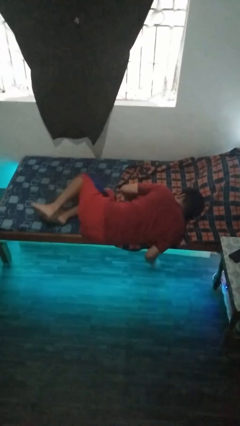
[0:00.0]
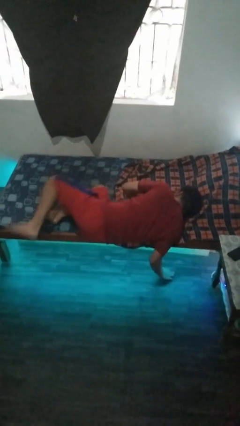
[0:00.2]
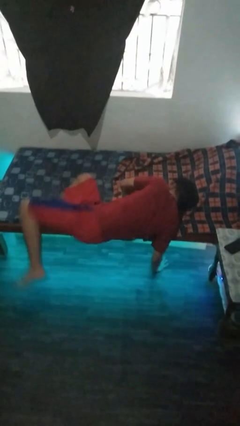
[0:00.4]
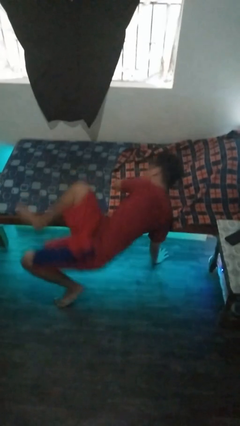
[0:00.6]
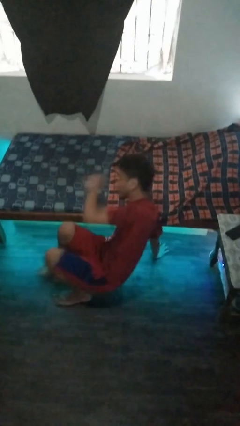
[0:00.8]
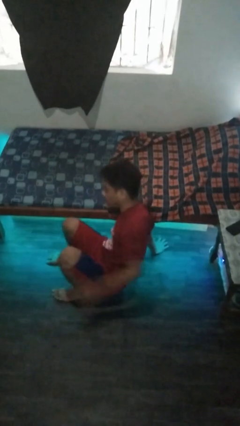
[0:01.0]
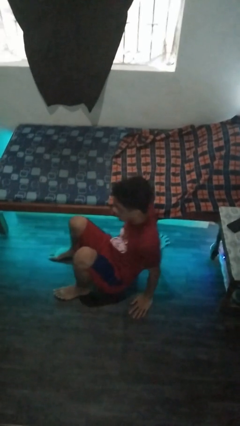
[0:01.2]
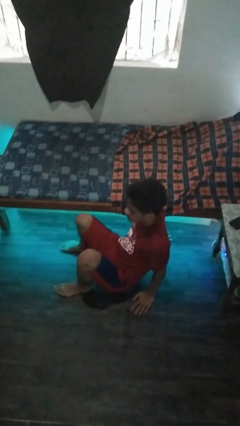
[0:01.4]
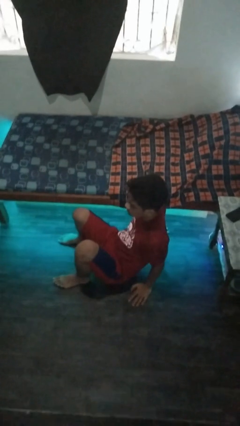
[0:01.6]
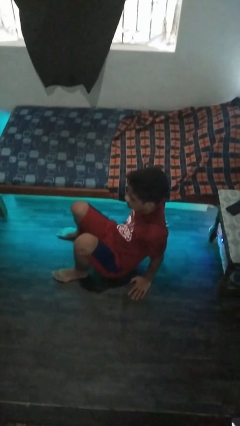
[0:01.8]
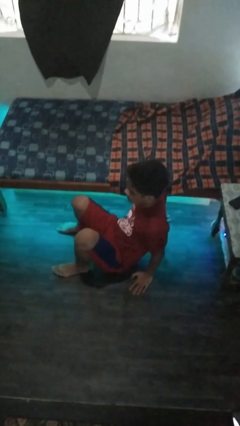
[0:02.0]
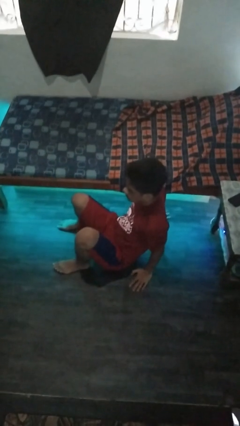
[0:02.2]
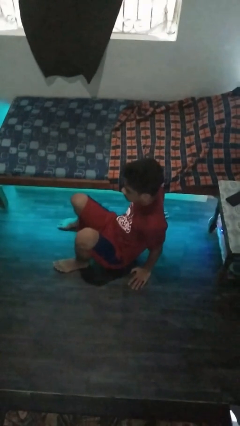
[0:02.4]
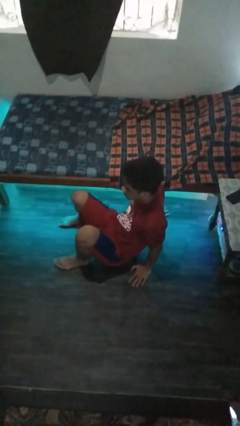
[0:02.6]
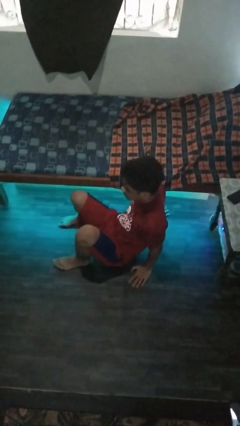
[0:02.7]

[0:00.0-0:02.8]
person falls from bed

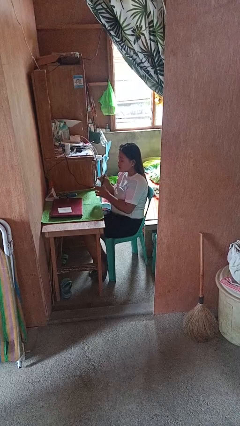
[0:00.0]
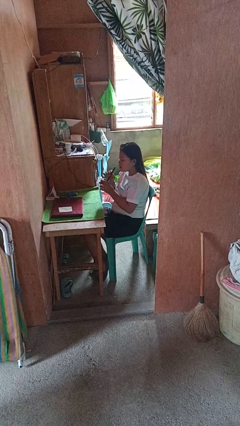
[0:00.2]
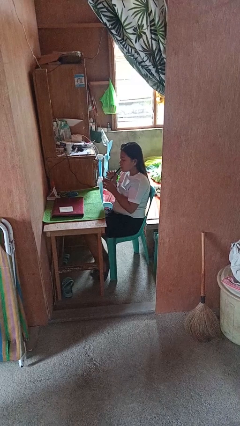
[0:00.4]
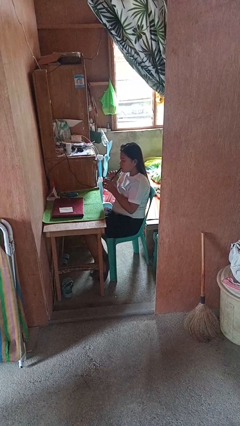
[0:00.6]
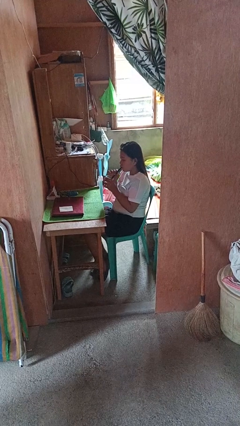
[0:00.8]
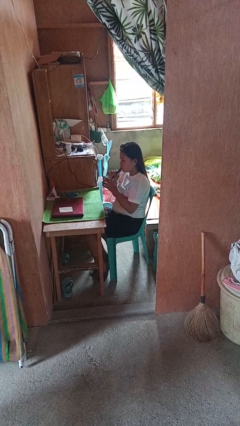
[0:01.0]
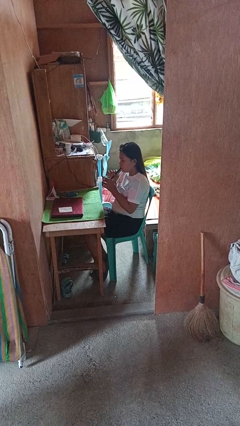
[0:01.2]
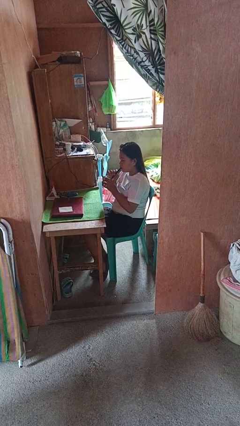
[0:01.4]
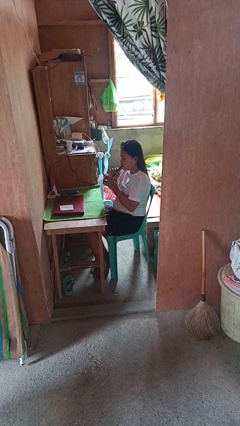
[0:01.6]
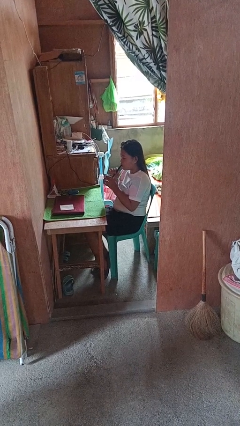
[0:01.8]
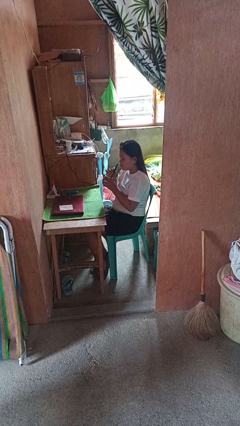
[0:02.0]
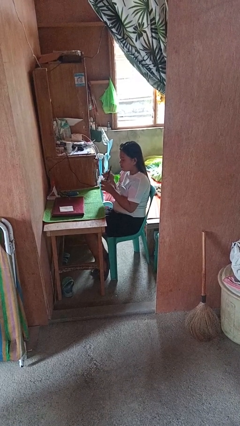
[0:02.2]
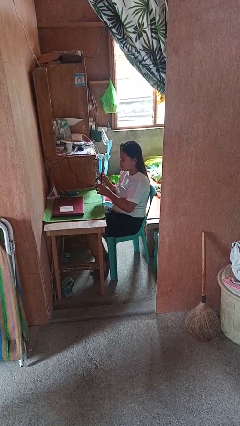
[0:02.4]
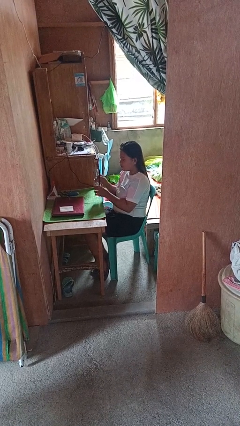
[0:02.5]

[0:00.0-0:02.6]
person drinks from straw

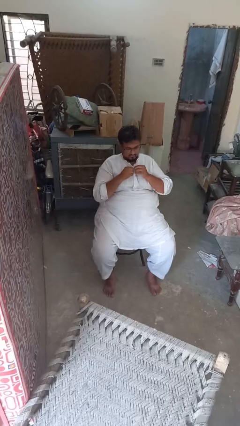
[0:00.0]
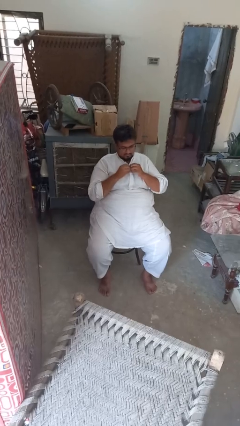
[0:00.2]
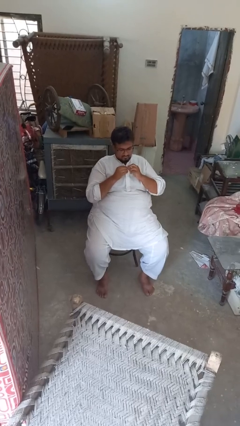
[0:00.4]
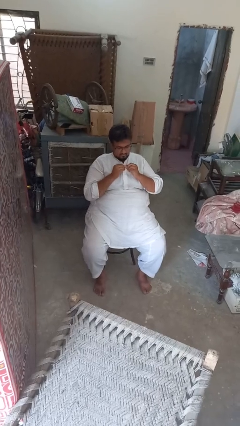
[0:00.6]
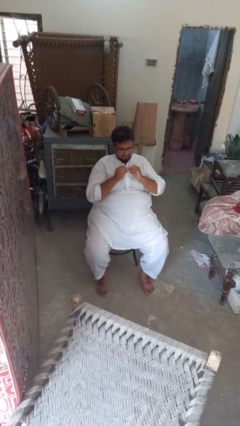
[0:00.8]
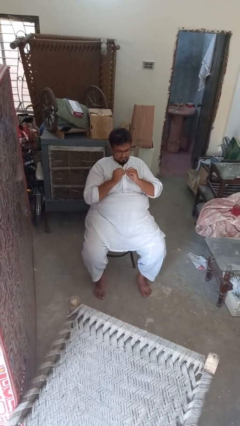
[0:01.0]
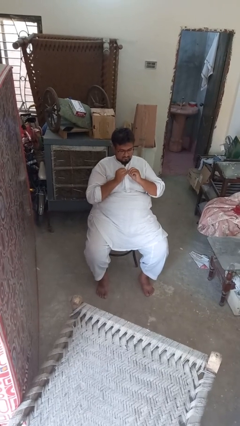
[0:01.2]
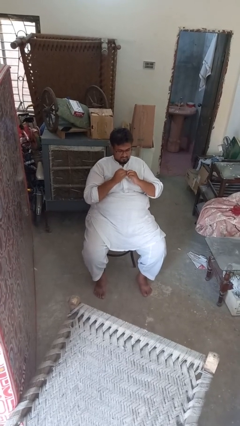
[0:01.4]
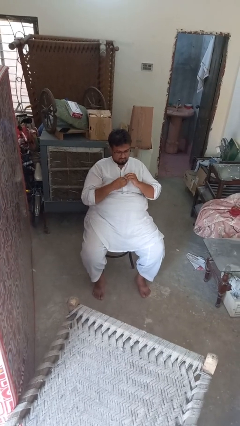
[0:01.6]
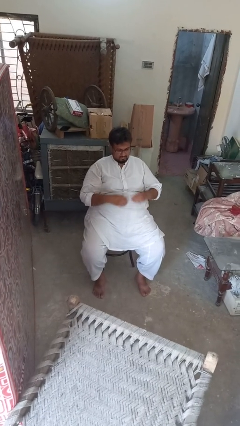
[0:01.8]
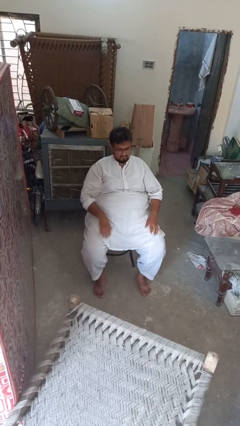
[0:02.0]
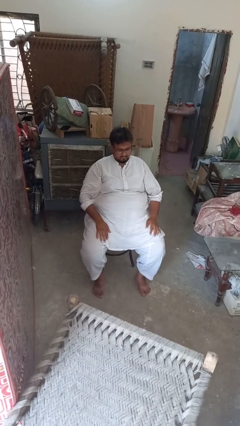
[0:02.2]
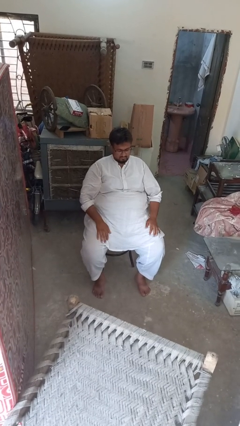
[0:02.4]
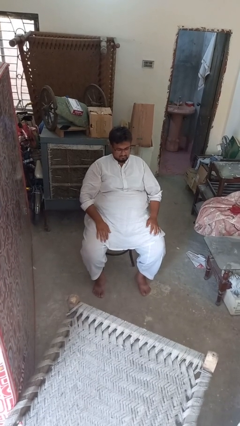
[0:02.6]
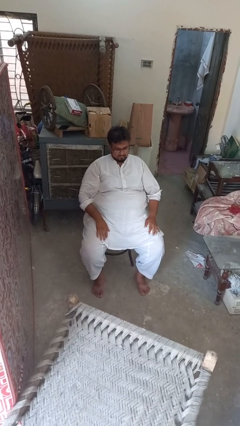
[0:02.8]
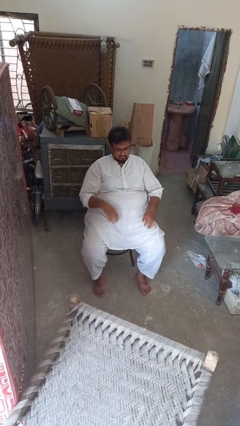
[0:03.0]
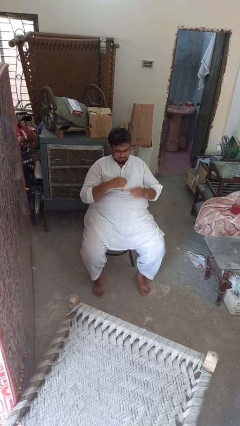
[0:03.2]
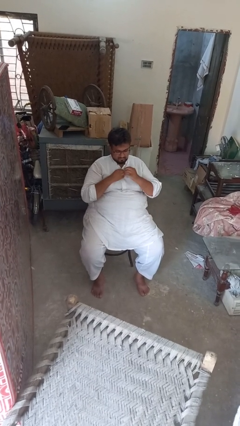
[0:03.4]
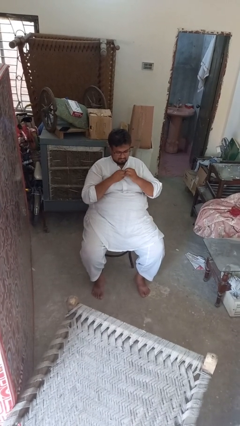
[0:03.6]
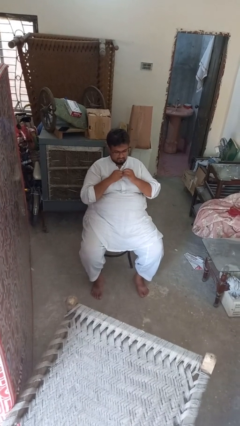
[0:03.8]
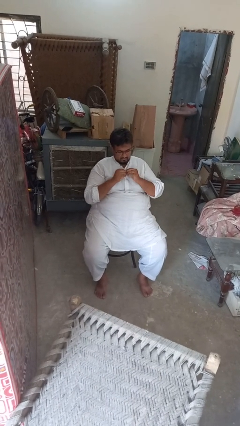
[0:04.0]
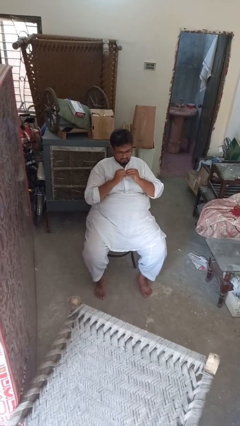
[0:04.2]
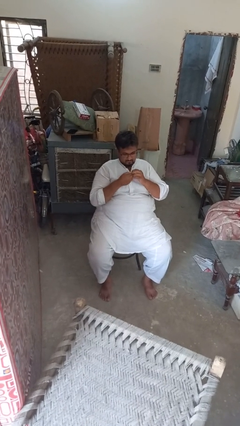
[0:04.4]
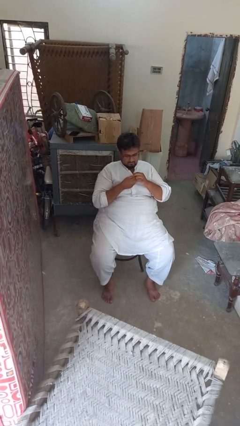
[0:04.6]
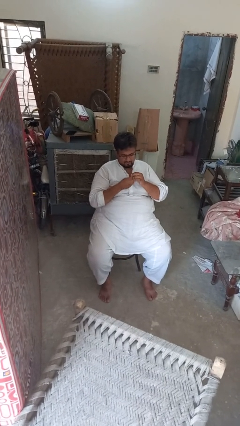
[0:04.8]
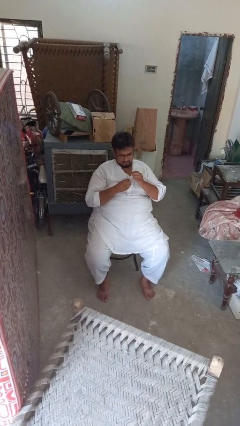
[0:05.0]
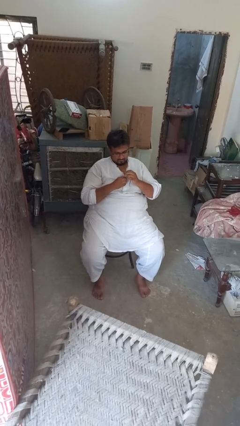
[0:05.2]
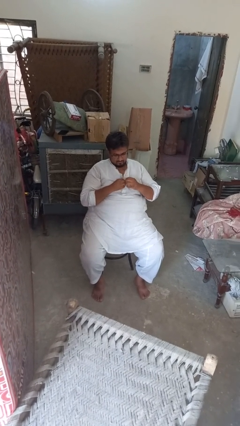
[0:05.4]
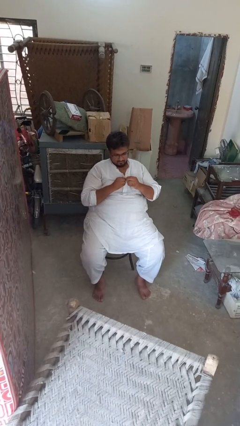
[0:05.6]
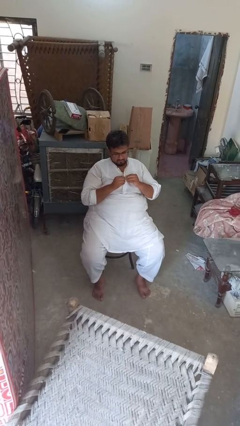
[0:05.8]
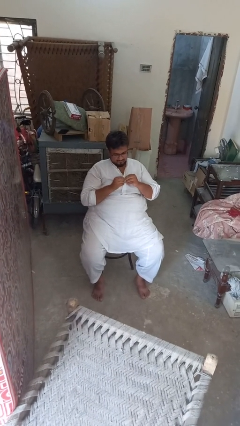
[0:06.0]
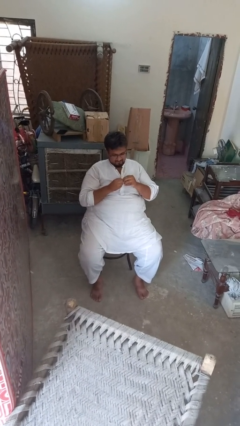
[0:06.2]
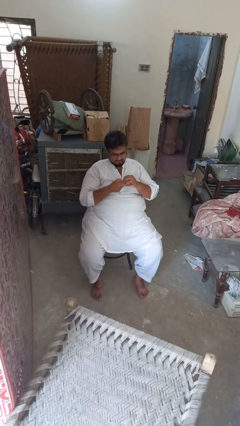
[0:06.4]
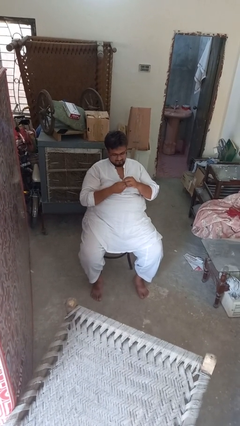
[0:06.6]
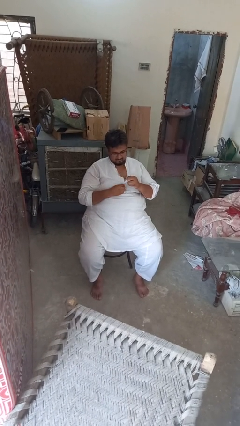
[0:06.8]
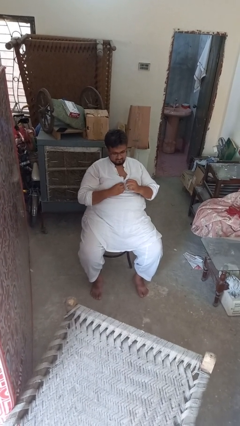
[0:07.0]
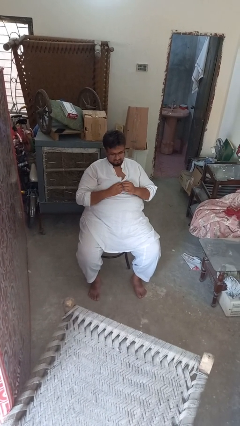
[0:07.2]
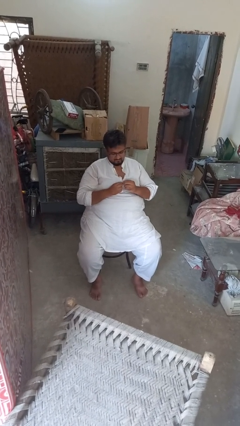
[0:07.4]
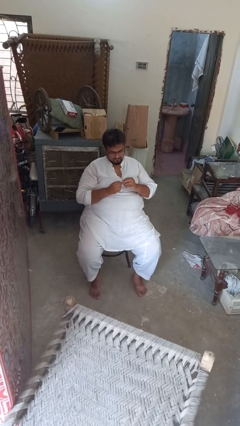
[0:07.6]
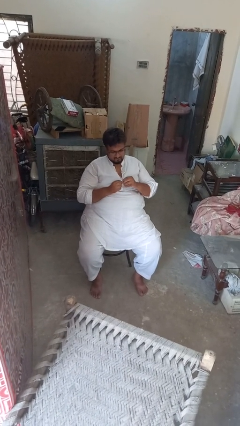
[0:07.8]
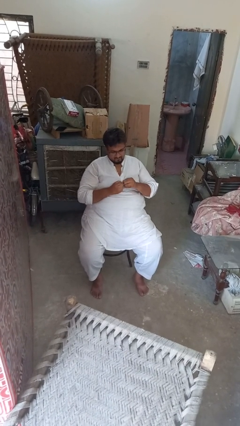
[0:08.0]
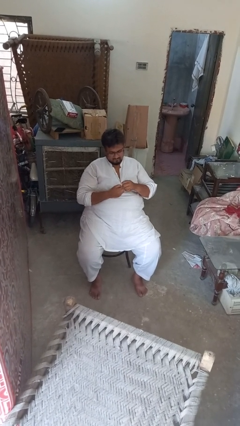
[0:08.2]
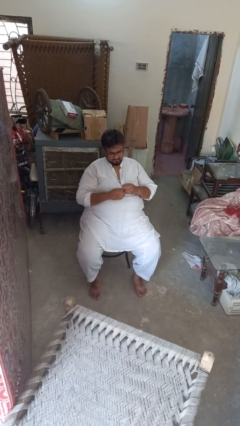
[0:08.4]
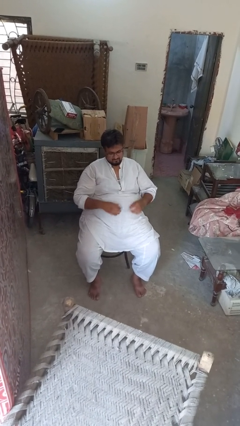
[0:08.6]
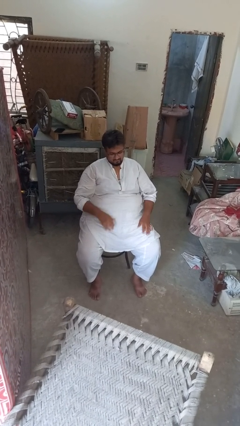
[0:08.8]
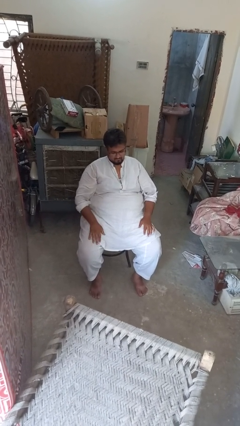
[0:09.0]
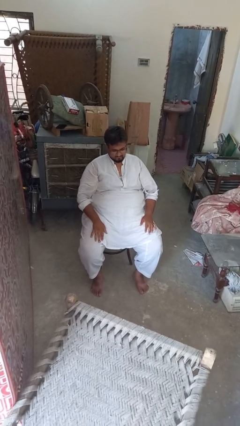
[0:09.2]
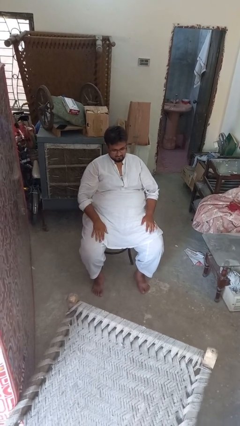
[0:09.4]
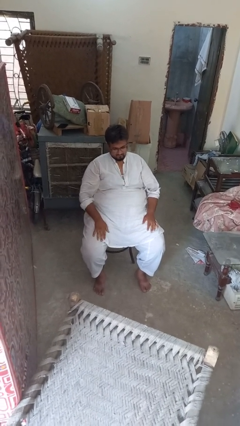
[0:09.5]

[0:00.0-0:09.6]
person unbuttons shirt

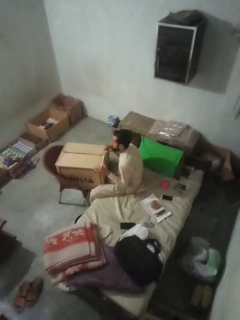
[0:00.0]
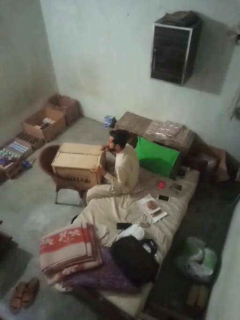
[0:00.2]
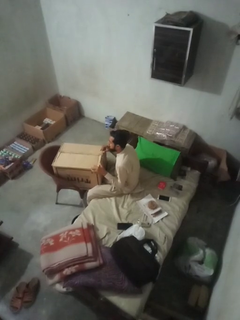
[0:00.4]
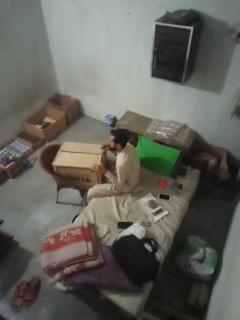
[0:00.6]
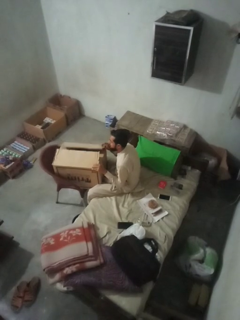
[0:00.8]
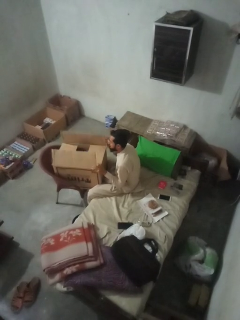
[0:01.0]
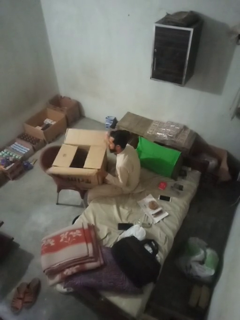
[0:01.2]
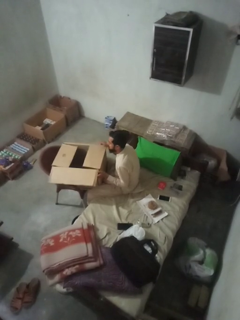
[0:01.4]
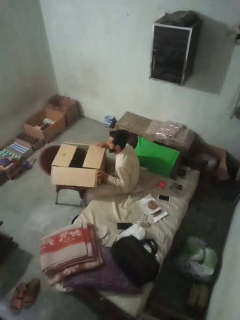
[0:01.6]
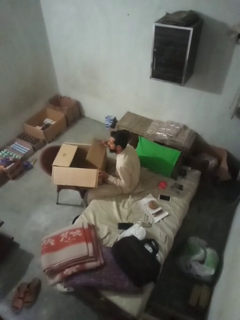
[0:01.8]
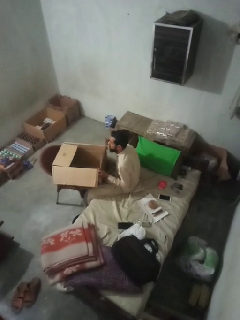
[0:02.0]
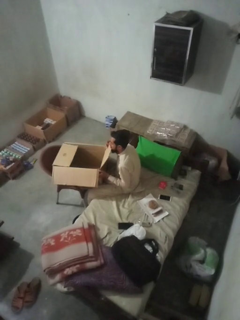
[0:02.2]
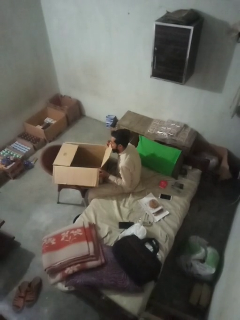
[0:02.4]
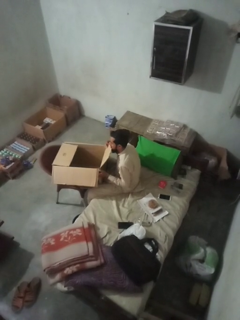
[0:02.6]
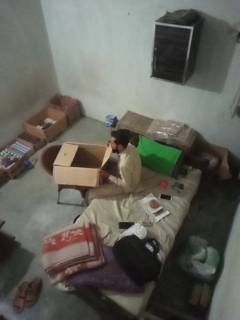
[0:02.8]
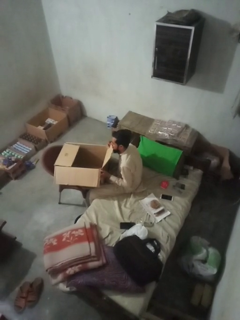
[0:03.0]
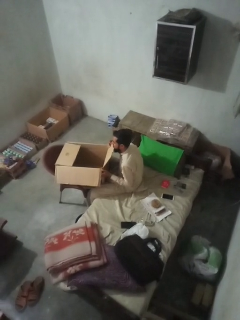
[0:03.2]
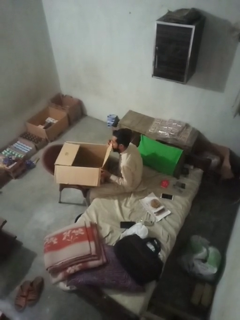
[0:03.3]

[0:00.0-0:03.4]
person opens box

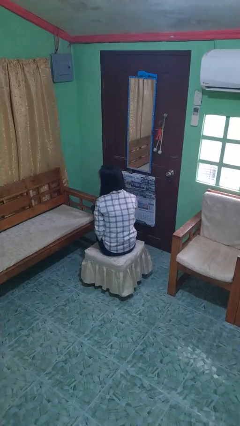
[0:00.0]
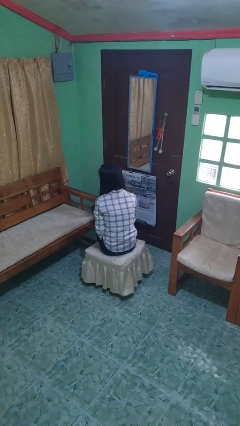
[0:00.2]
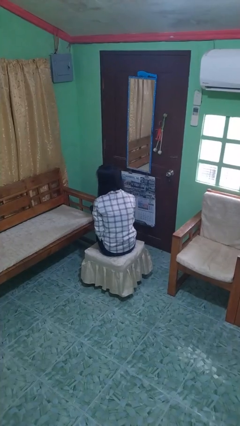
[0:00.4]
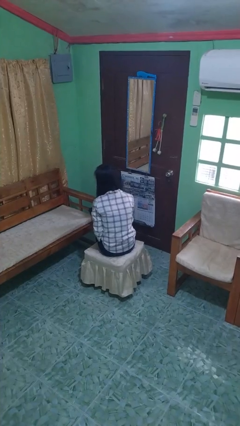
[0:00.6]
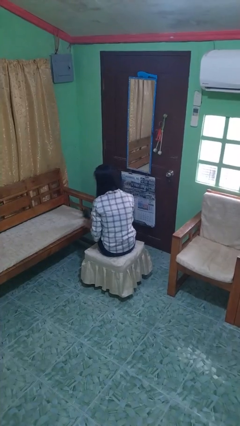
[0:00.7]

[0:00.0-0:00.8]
person puts down object on couch
